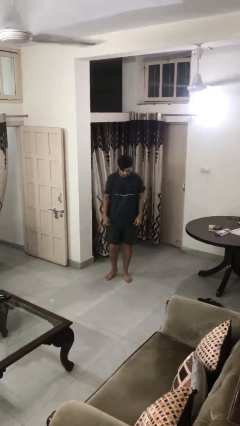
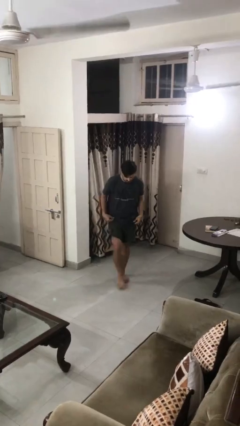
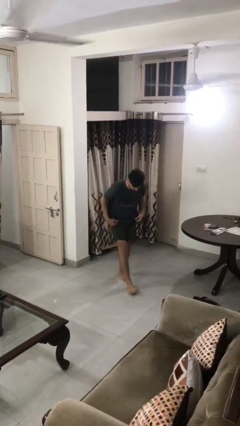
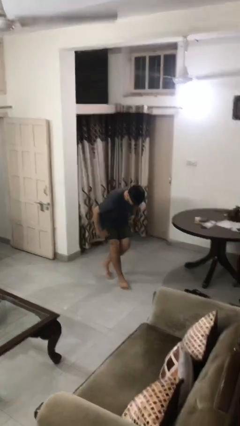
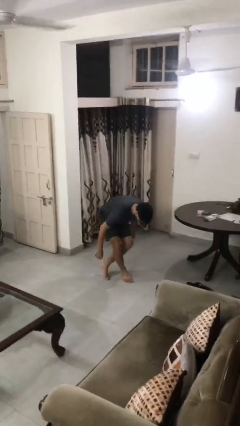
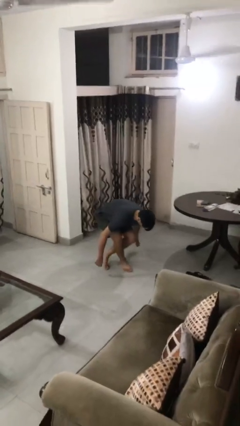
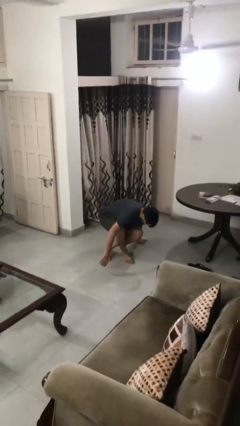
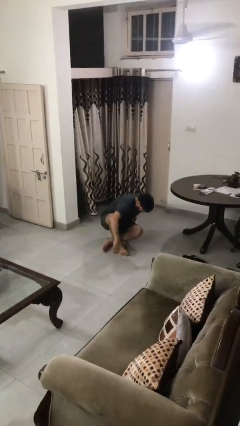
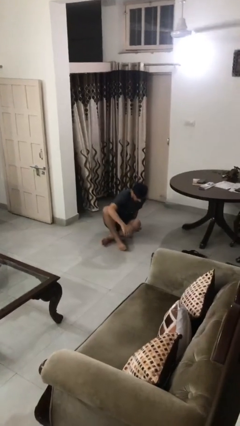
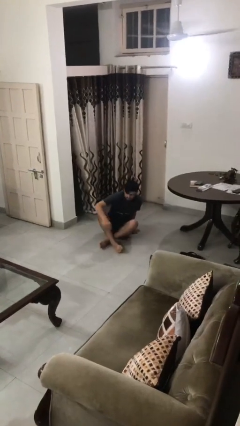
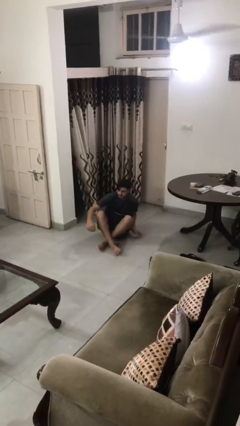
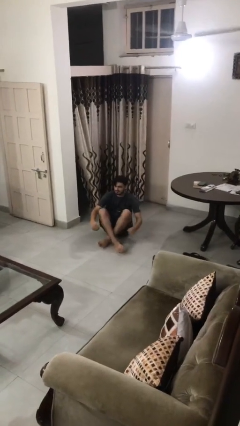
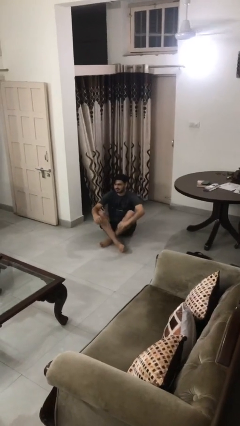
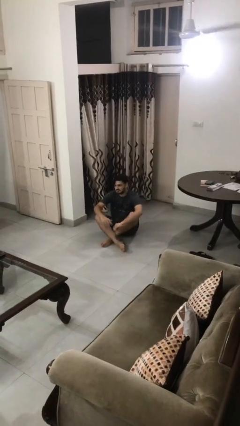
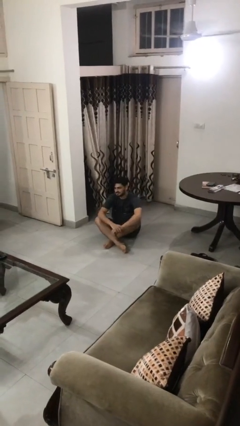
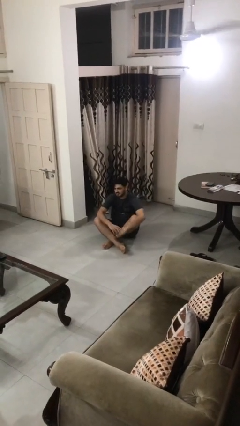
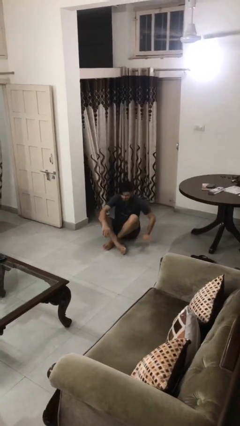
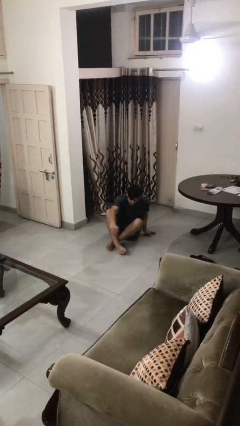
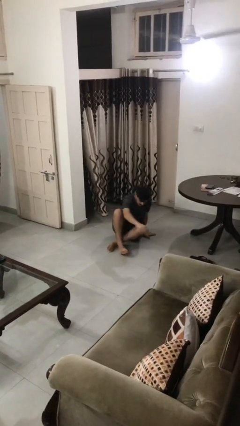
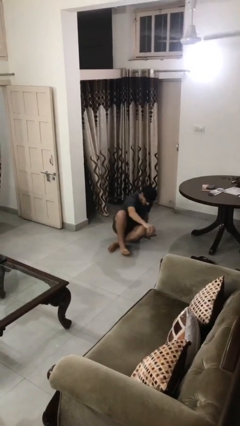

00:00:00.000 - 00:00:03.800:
person sits crisscross

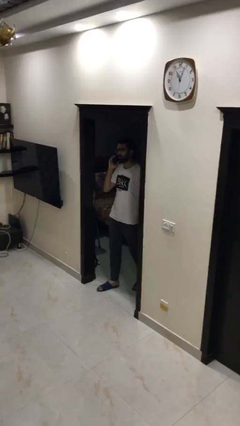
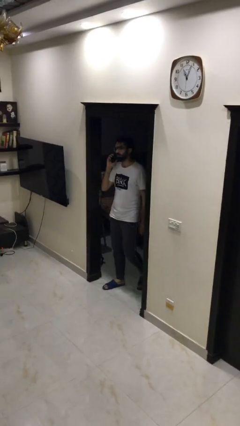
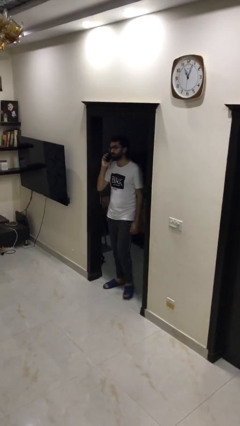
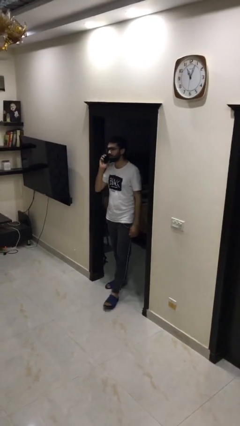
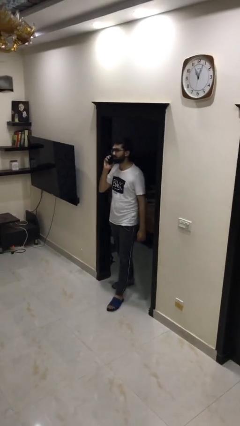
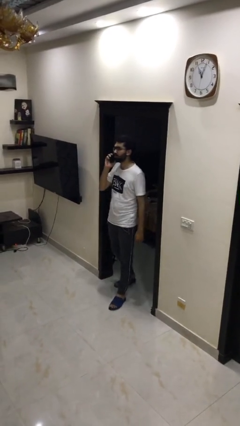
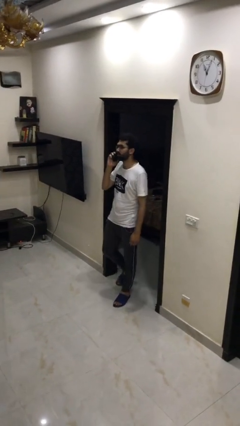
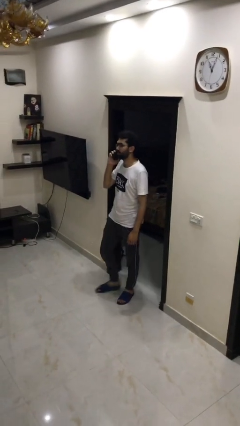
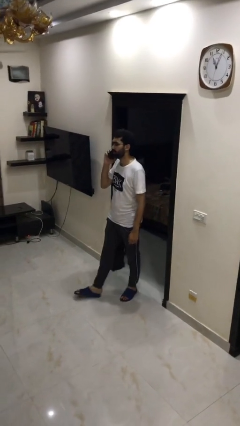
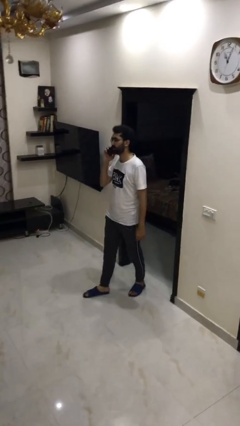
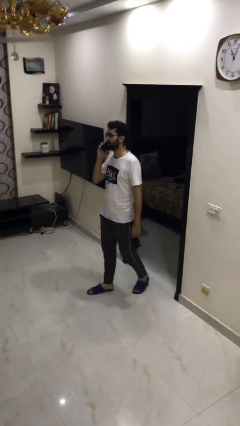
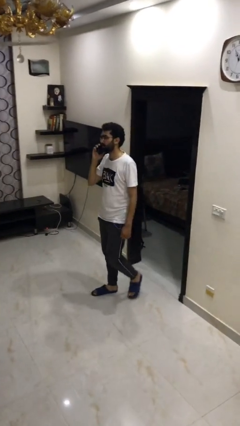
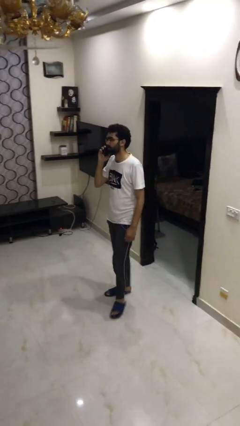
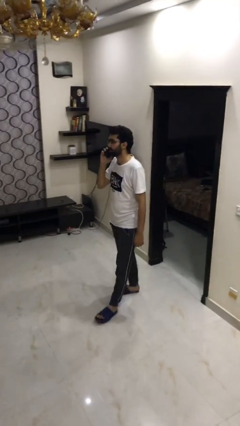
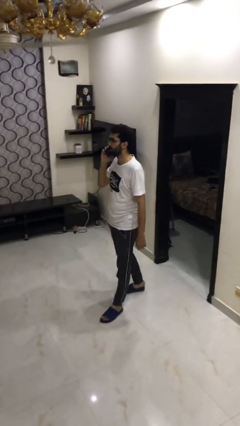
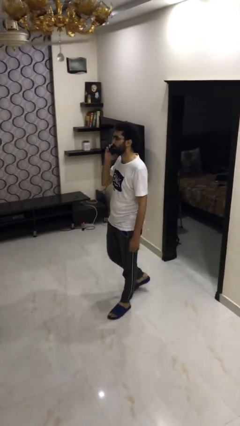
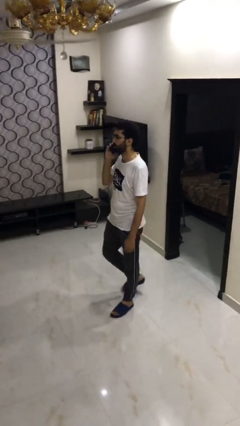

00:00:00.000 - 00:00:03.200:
person enters scene through structure

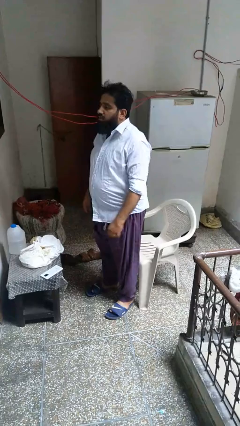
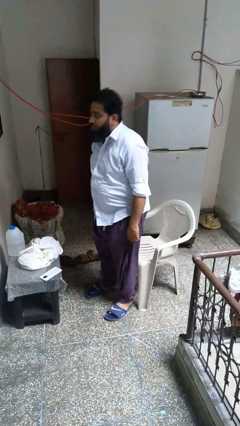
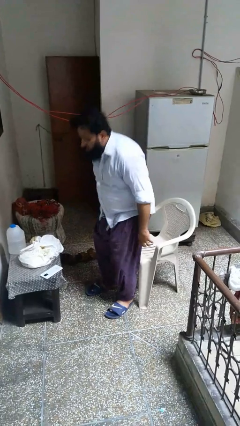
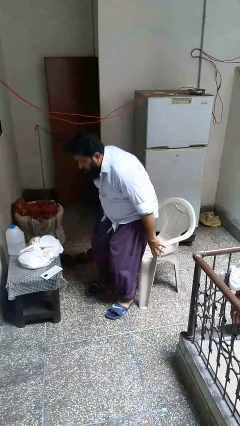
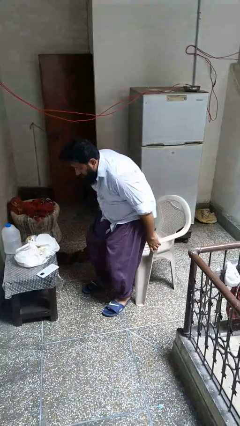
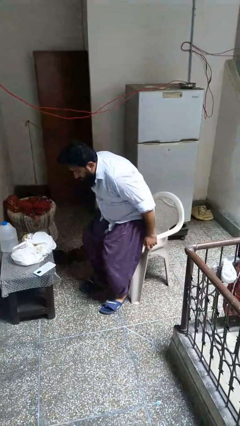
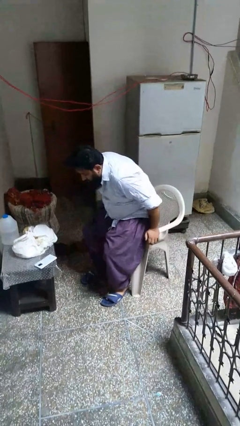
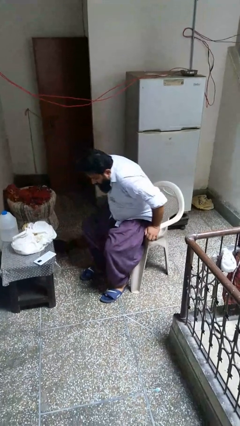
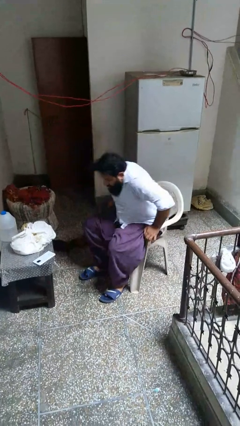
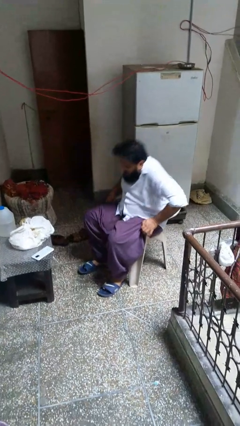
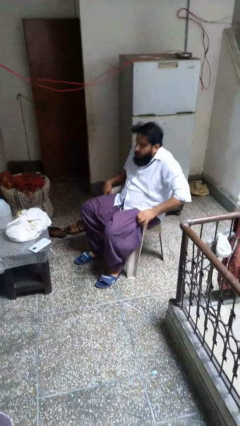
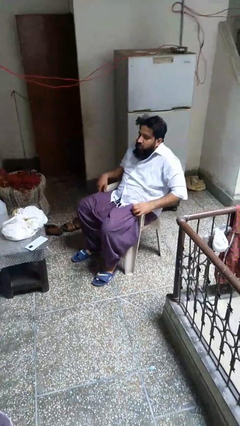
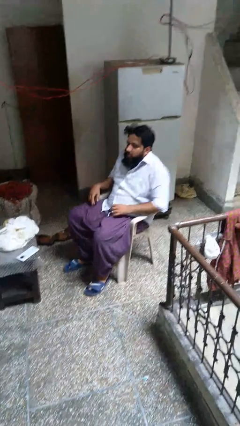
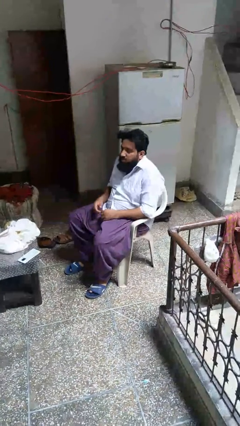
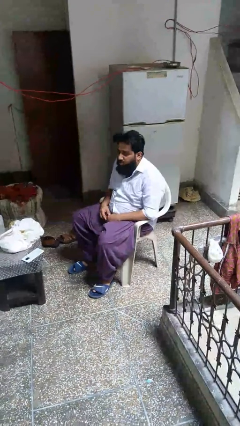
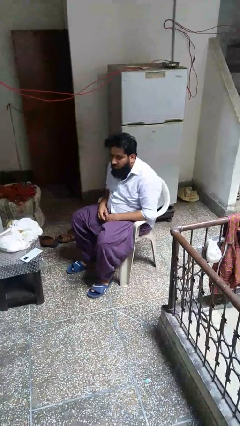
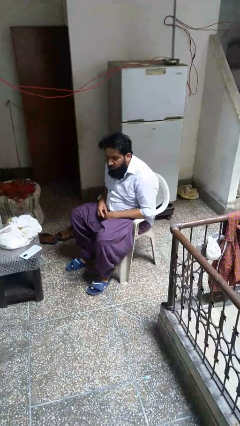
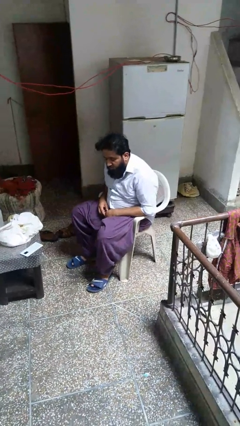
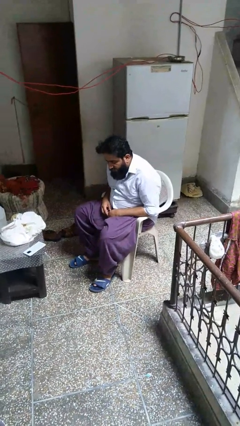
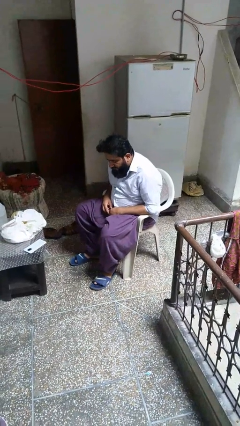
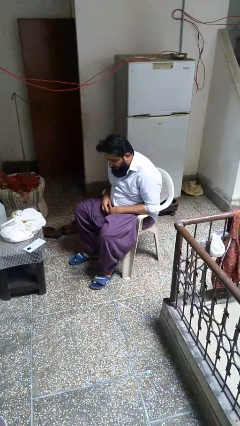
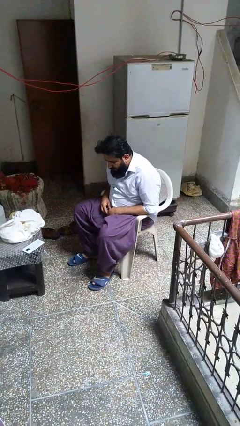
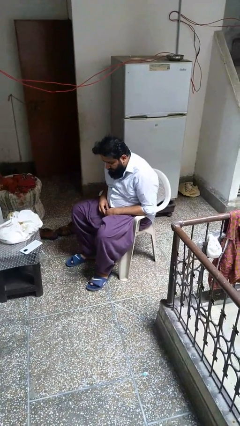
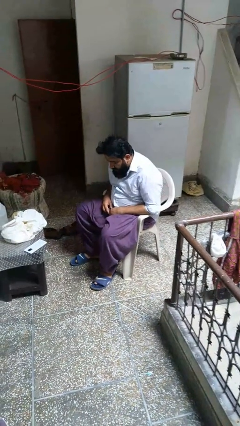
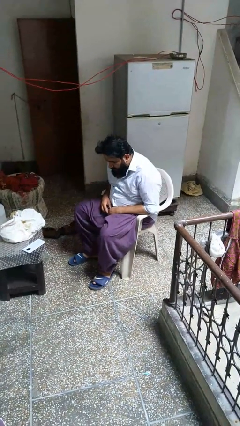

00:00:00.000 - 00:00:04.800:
person sits down

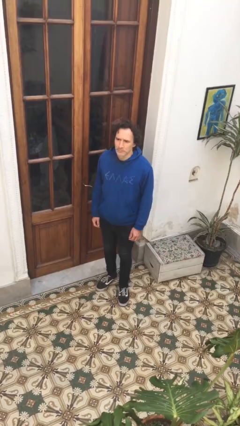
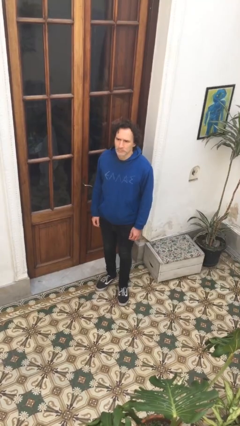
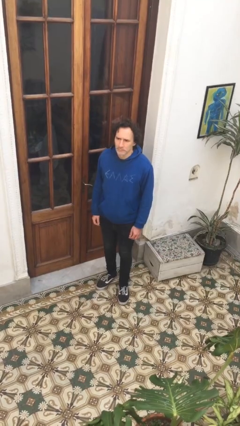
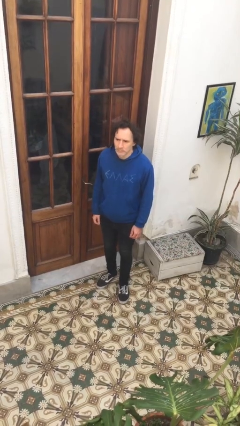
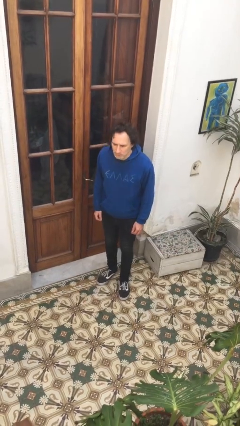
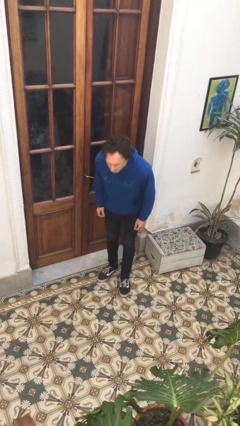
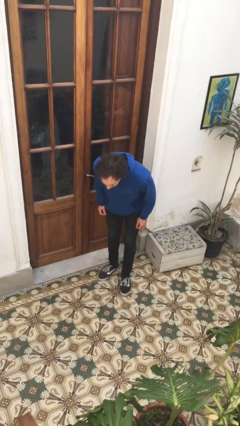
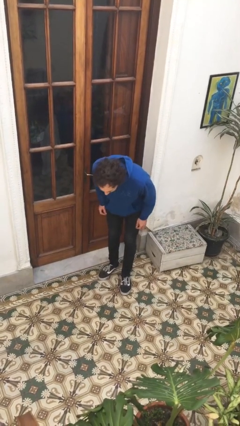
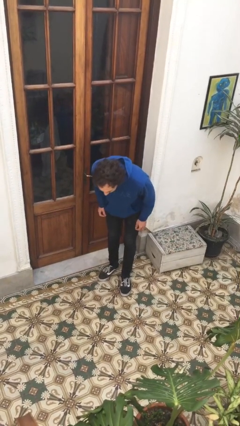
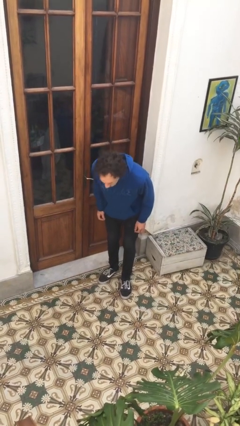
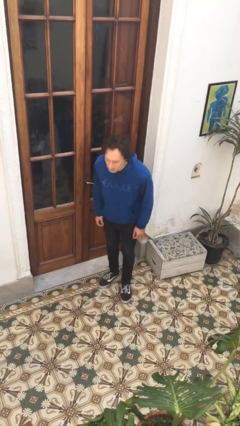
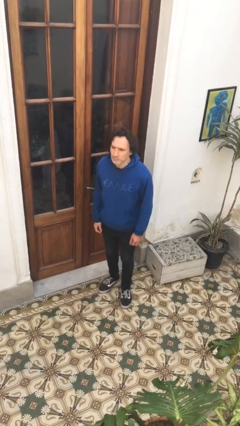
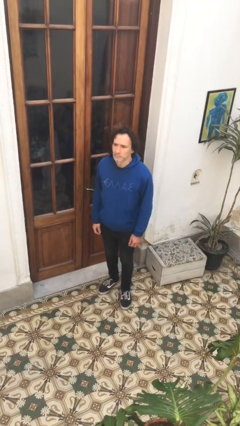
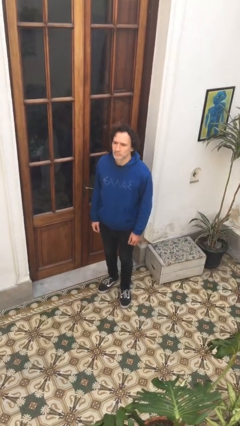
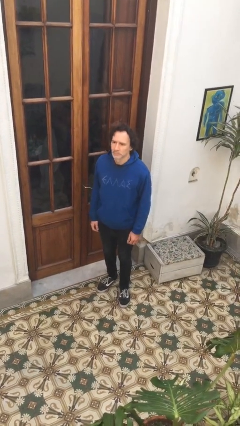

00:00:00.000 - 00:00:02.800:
person bows

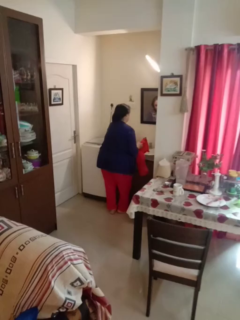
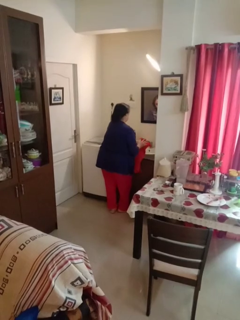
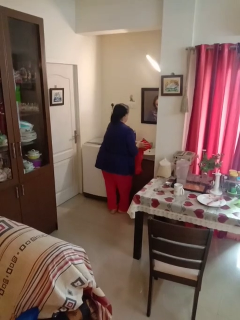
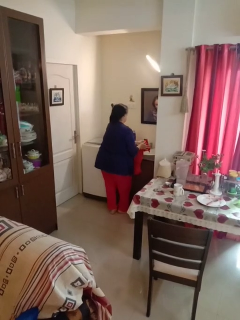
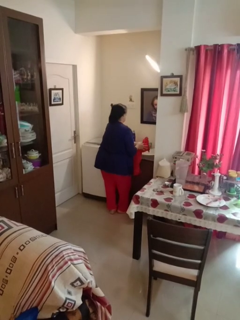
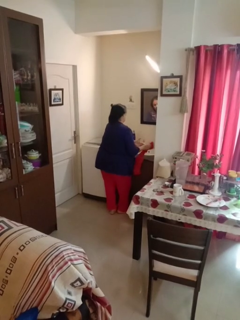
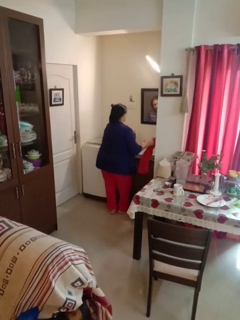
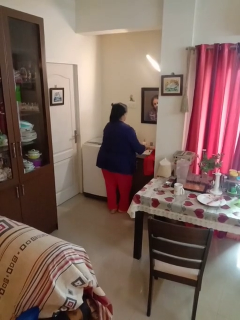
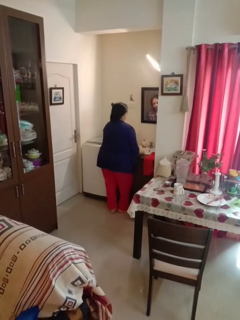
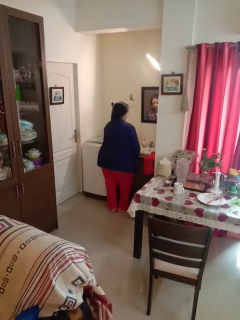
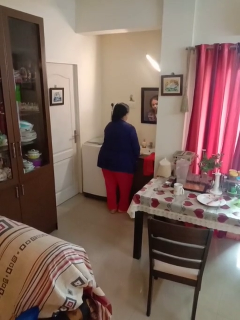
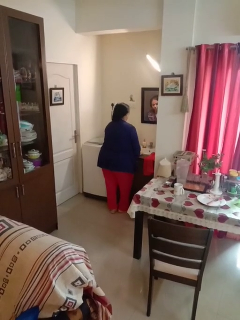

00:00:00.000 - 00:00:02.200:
person dries hands with towel

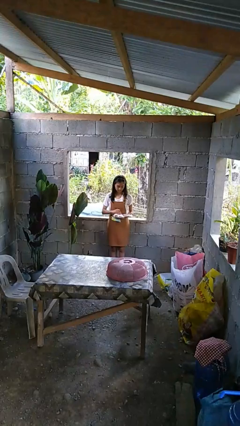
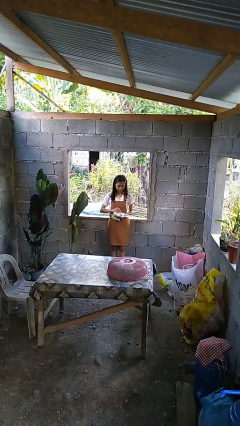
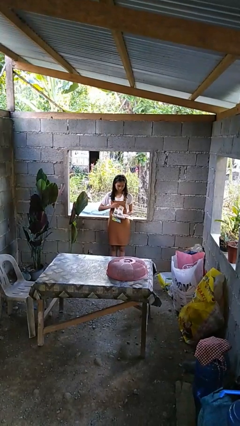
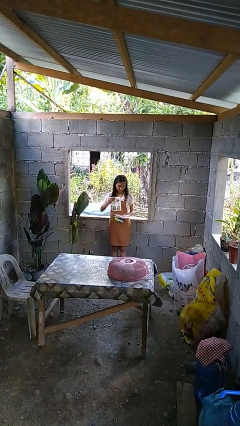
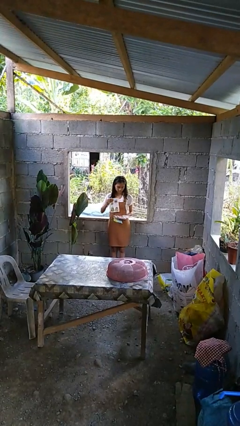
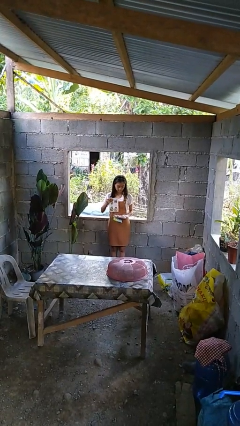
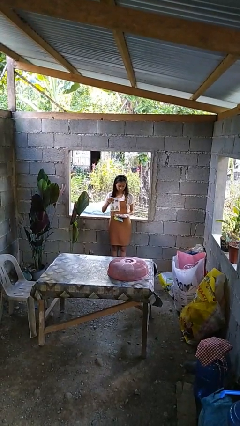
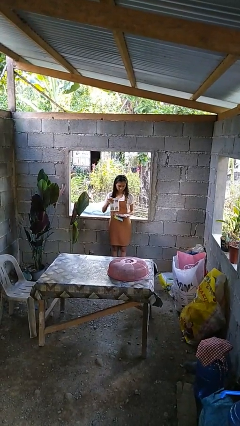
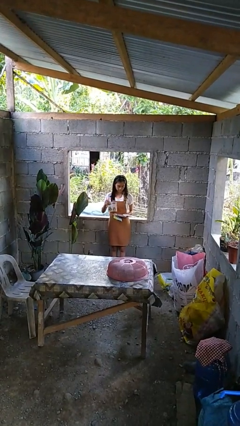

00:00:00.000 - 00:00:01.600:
person tears paper
